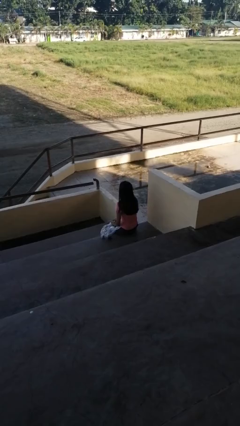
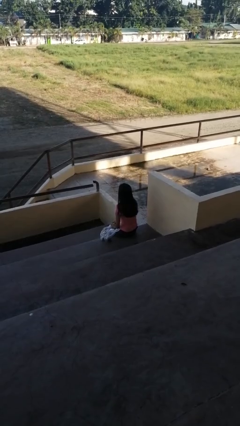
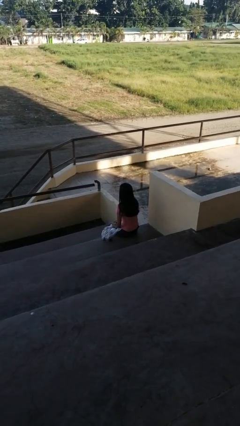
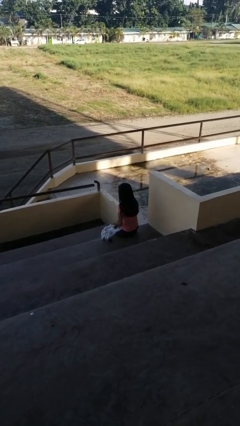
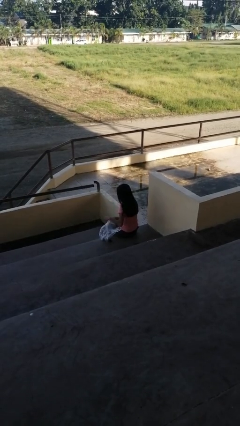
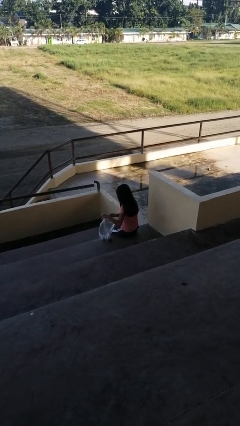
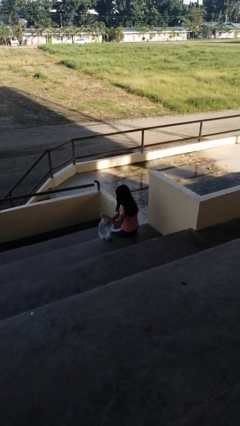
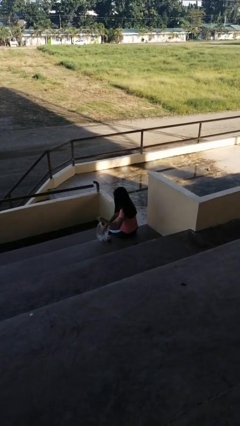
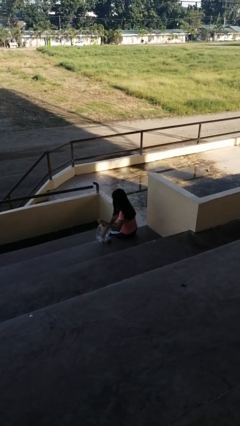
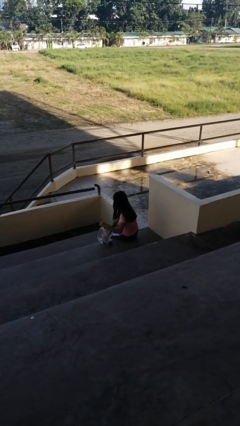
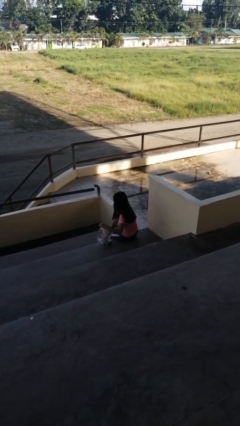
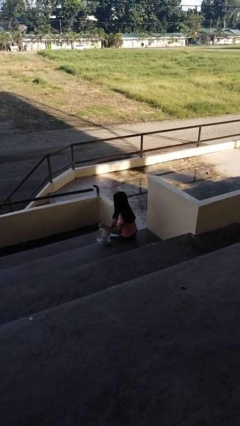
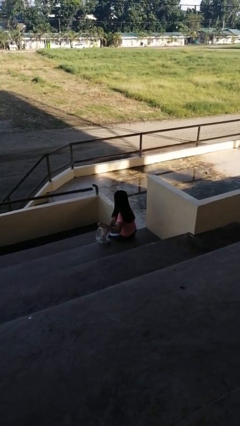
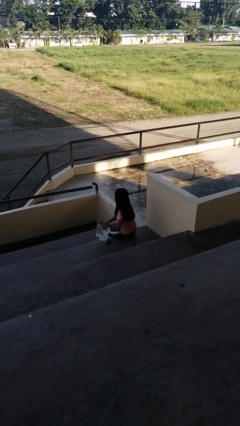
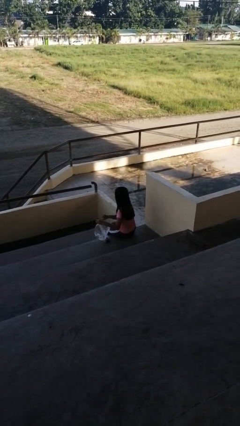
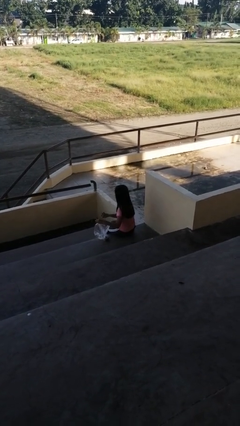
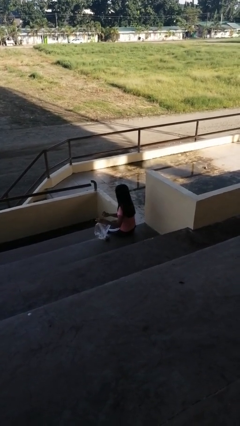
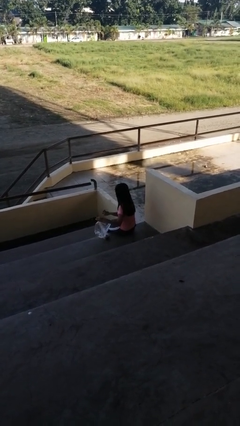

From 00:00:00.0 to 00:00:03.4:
person takes object from bag

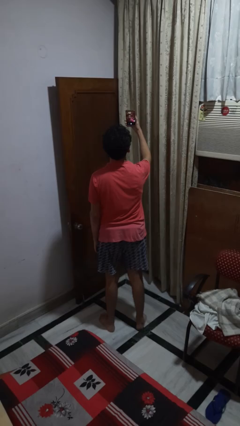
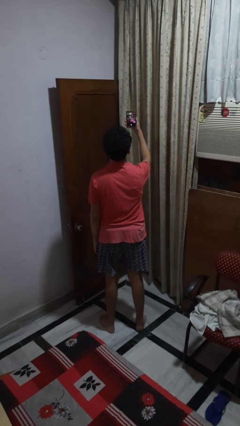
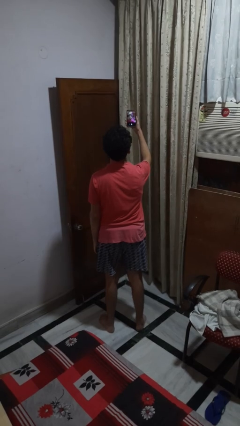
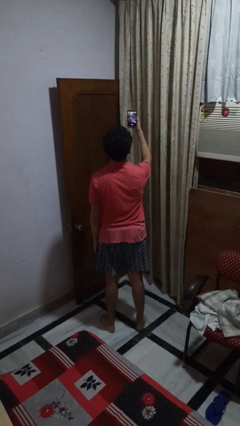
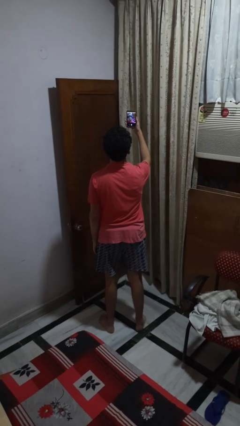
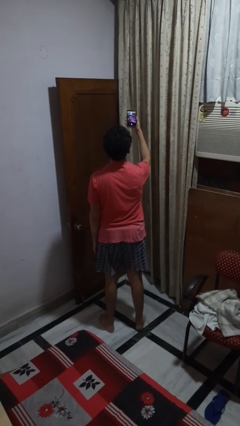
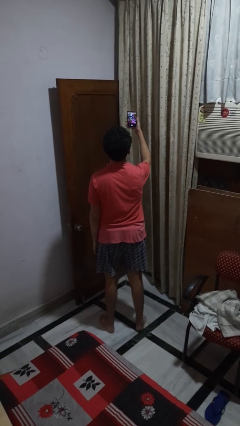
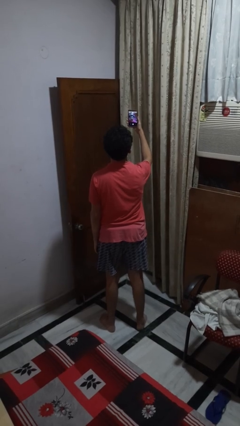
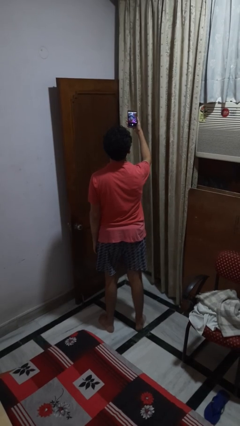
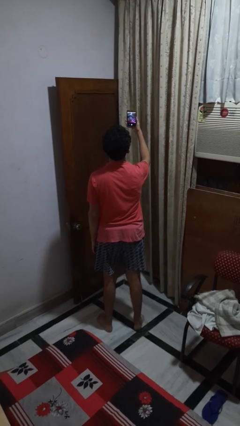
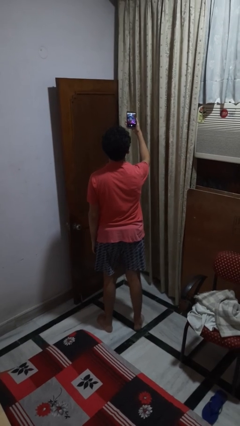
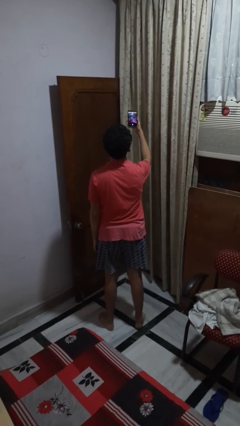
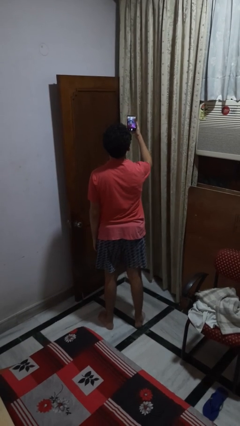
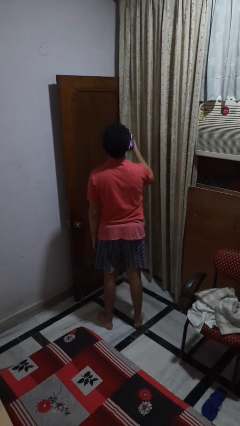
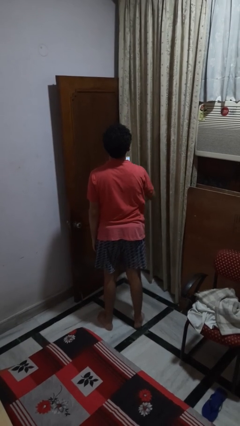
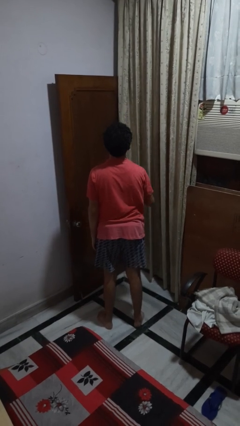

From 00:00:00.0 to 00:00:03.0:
person takes selfie

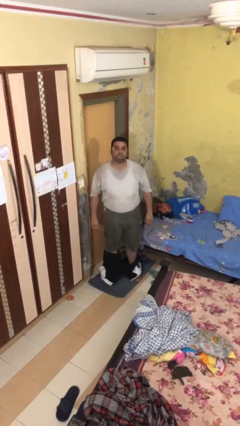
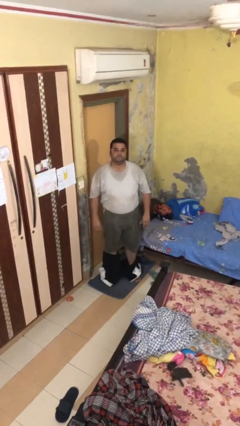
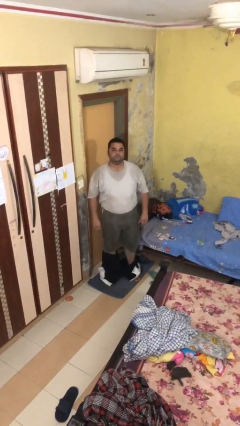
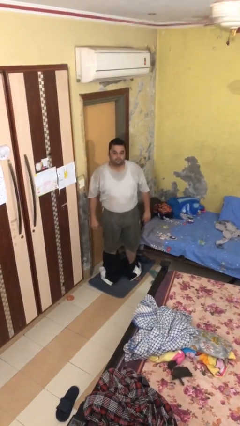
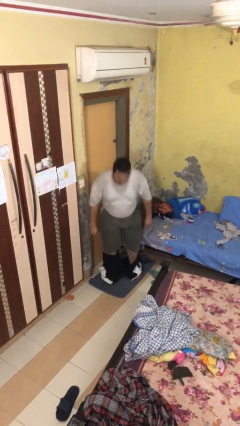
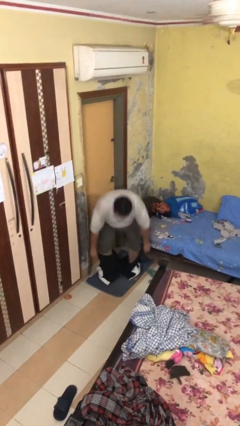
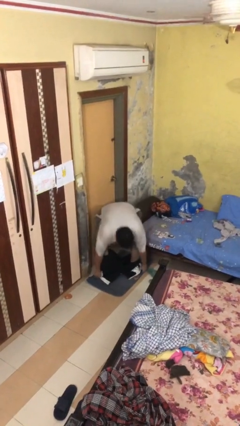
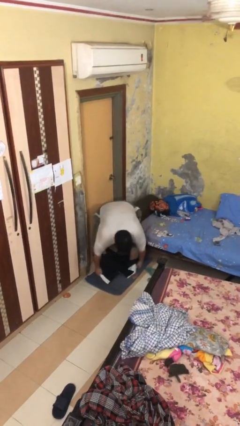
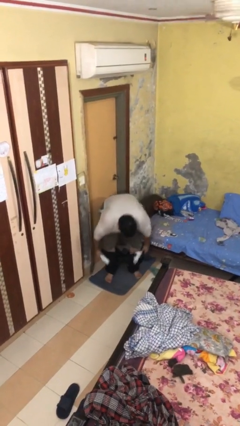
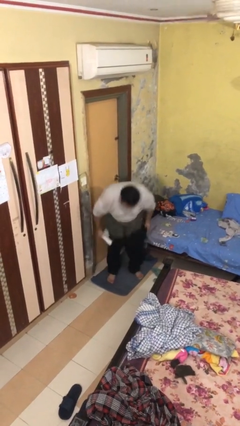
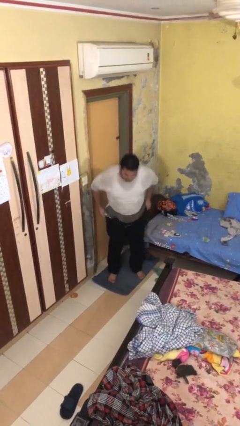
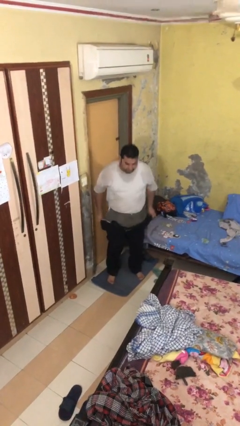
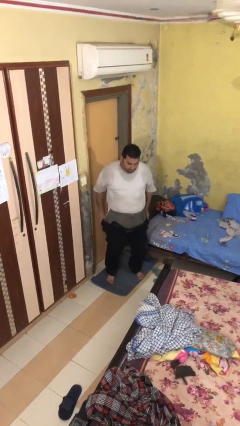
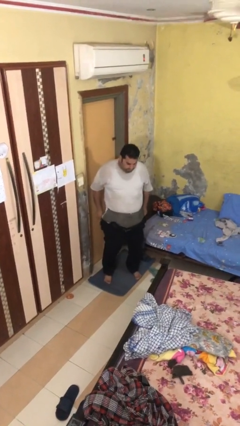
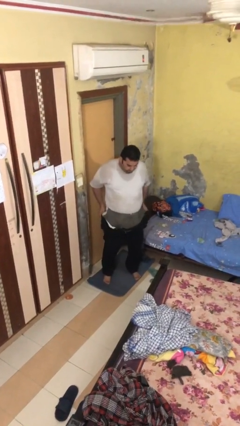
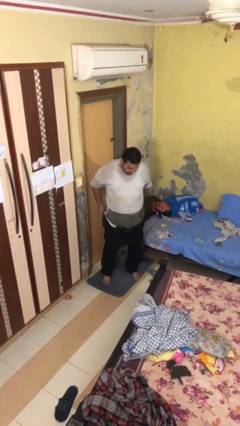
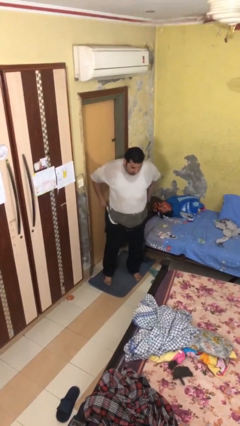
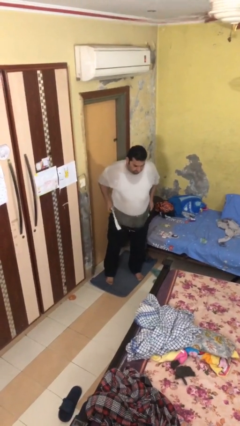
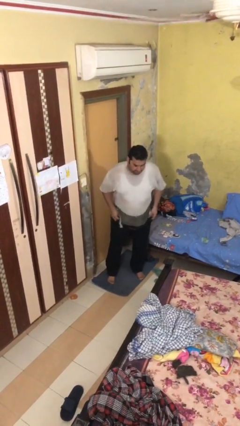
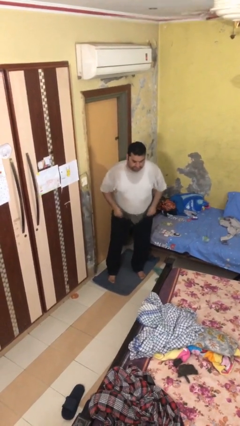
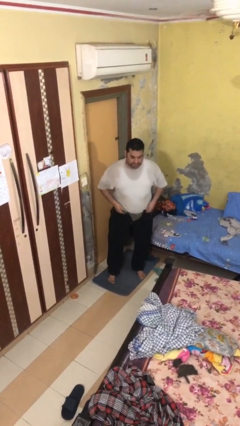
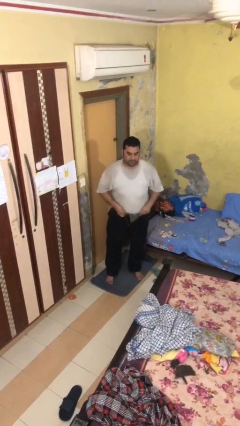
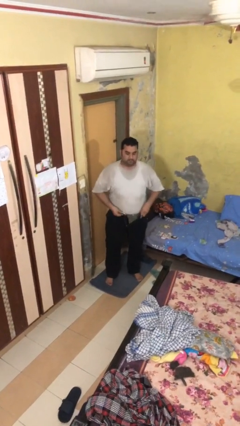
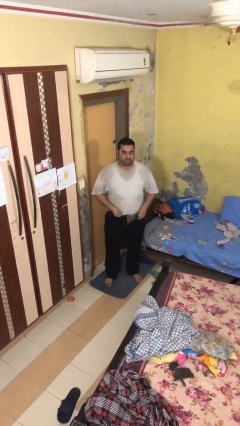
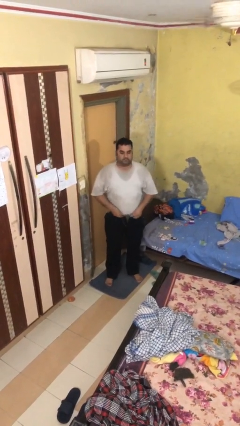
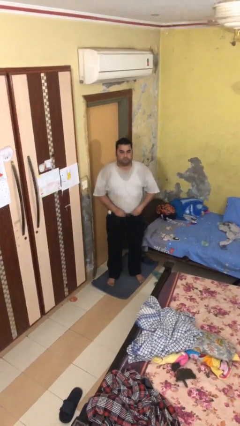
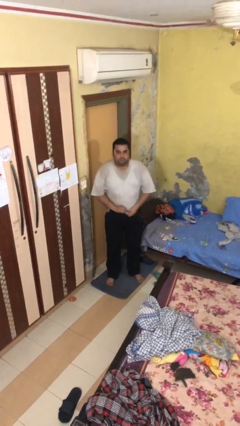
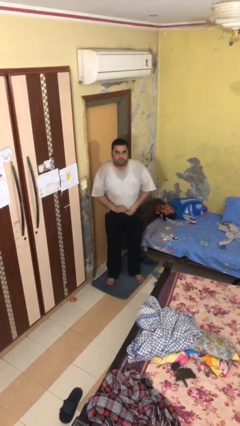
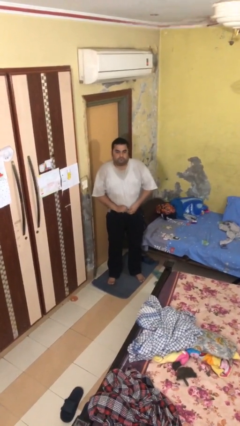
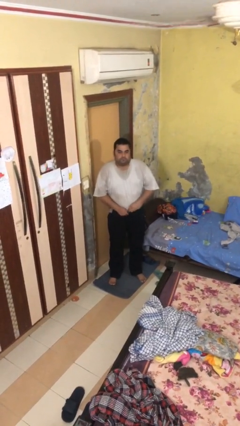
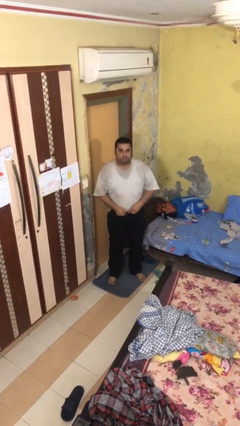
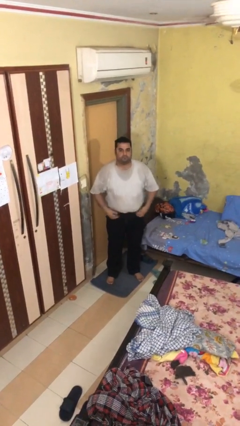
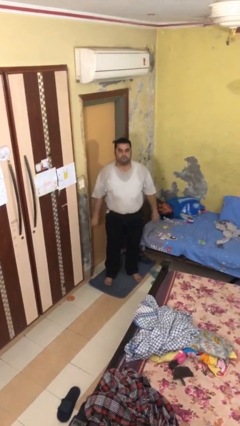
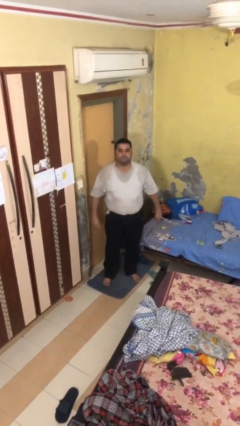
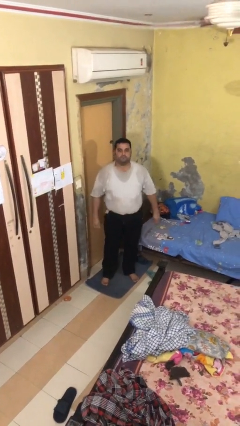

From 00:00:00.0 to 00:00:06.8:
person puts on pants

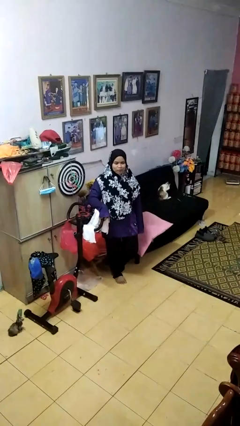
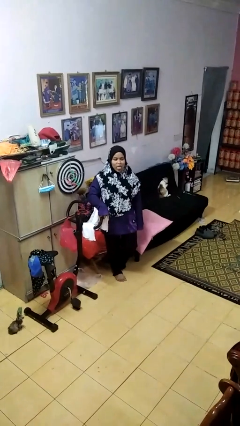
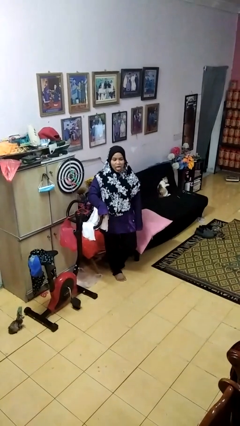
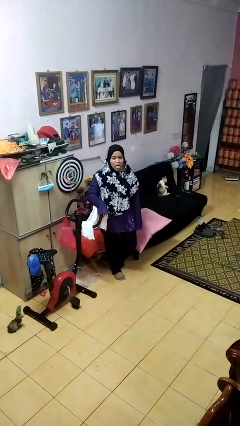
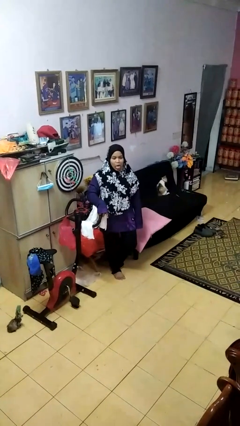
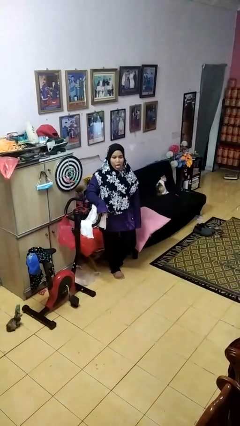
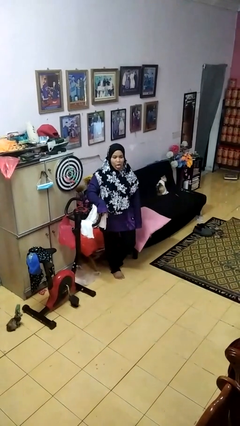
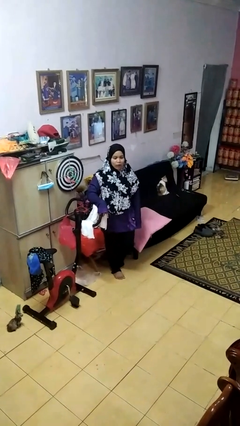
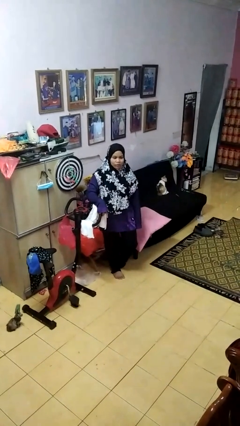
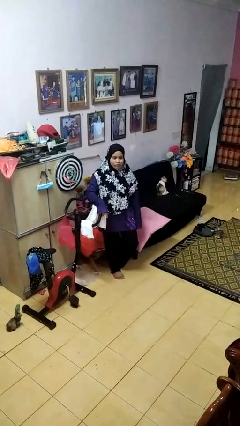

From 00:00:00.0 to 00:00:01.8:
person sticks out tongue

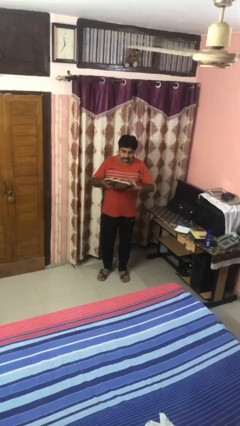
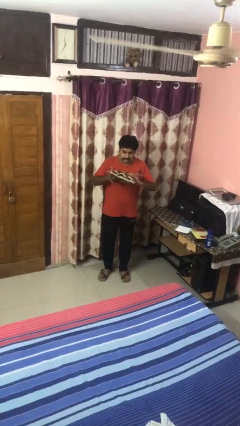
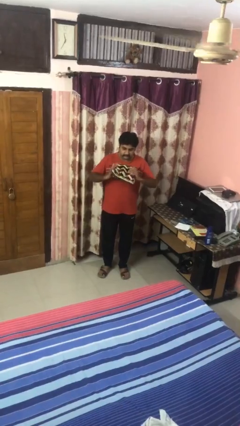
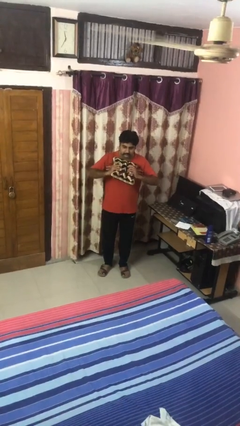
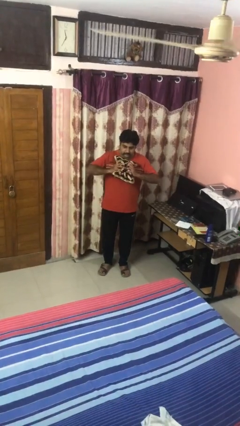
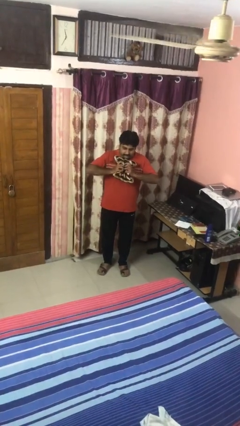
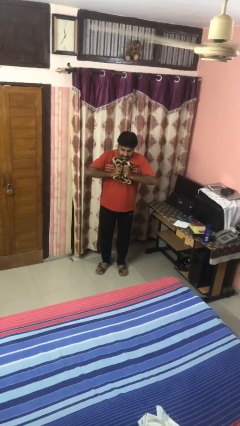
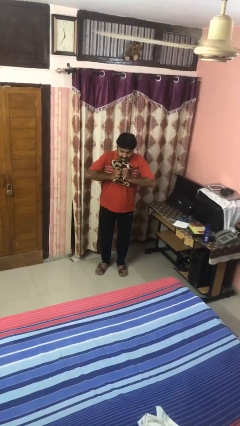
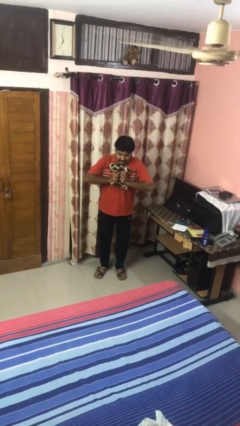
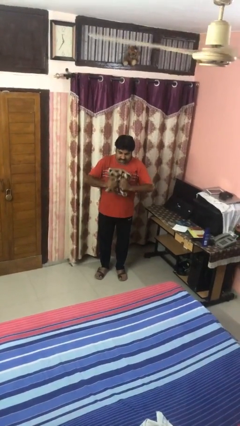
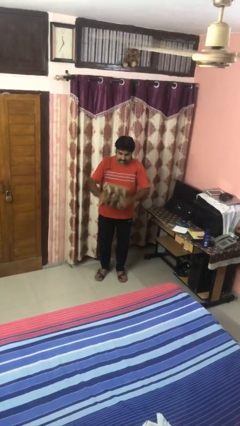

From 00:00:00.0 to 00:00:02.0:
person squeezes object

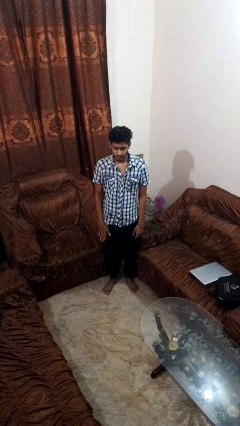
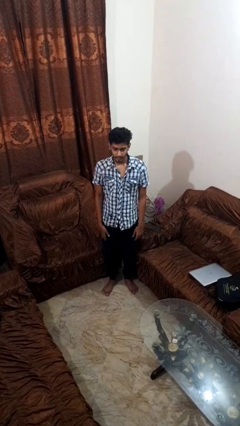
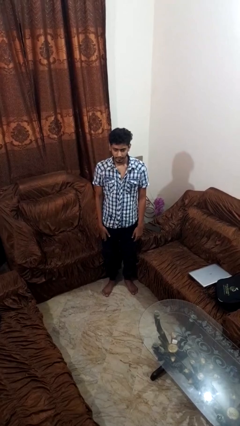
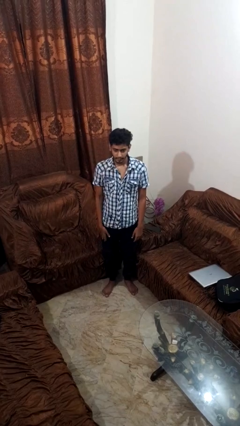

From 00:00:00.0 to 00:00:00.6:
person gestures lower hand

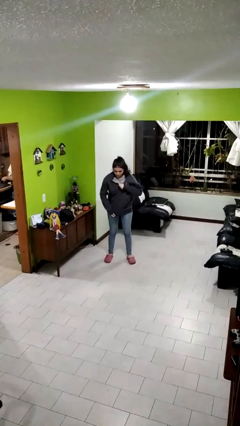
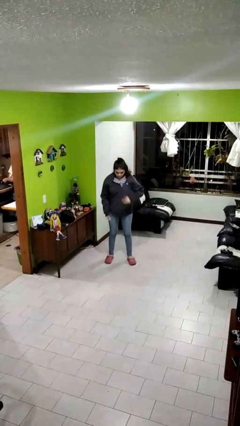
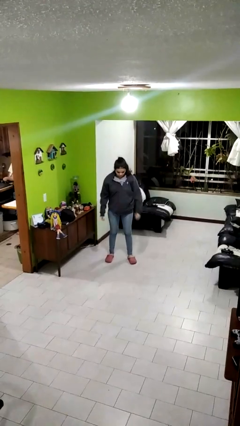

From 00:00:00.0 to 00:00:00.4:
person zips up jacket
